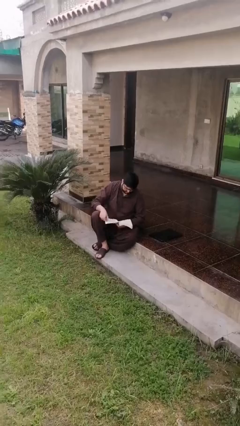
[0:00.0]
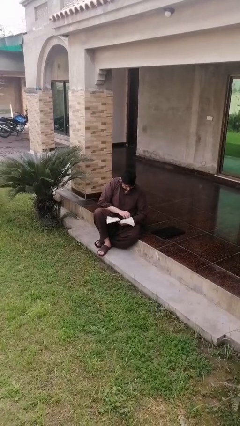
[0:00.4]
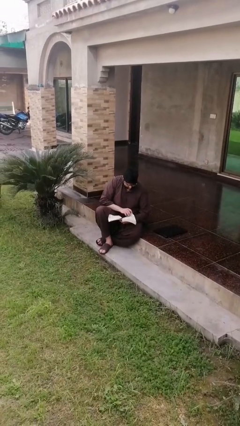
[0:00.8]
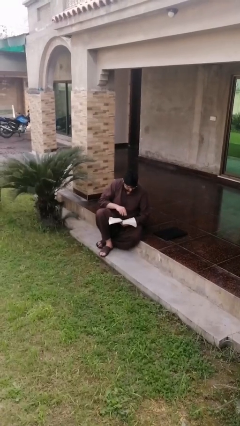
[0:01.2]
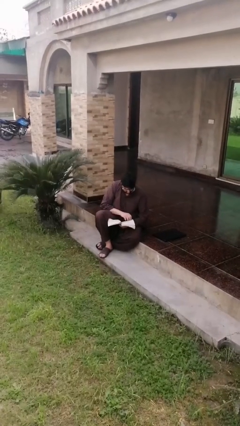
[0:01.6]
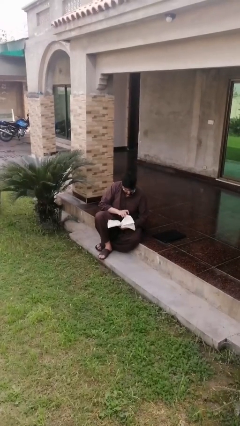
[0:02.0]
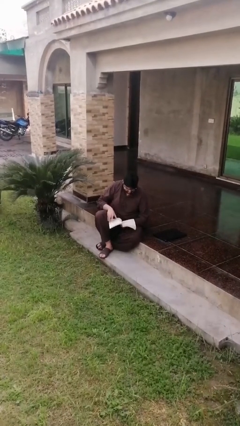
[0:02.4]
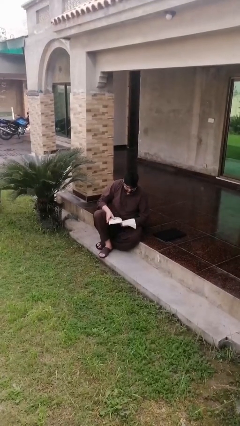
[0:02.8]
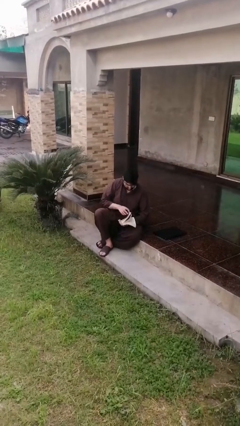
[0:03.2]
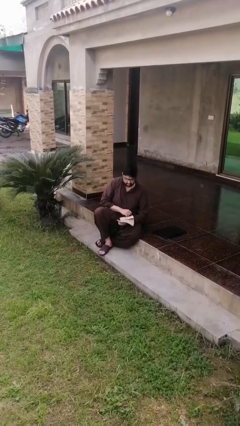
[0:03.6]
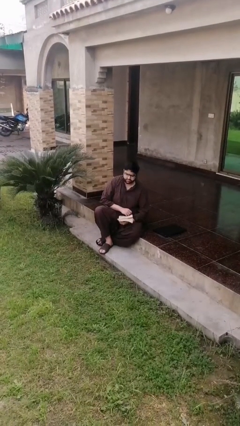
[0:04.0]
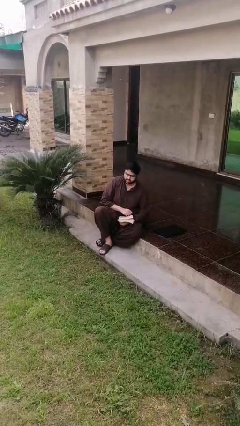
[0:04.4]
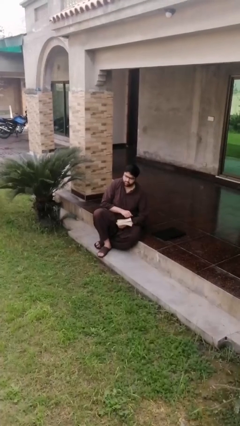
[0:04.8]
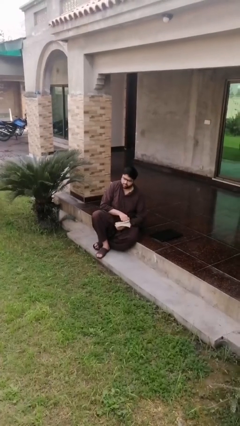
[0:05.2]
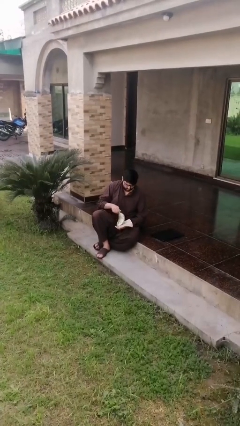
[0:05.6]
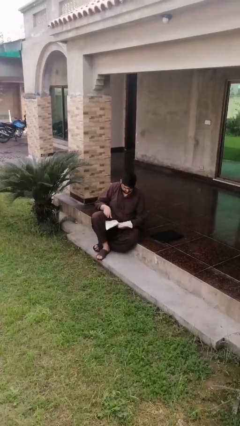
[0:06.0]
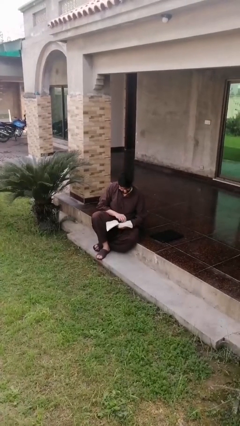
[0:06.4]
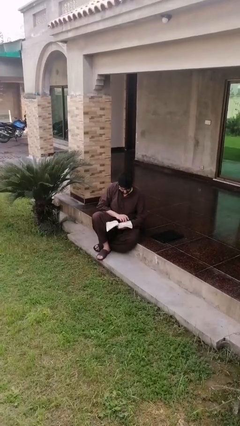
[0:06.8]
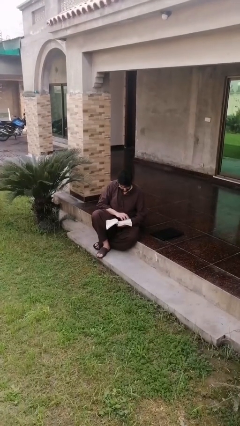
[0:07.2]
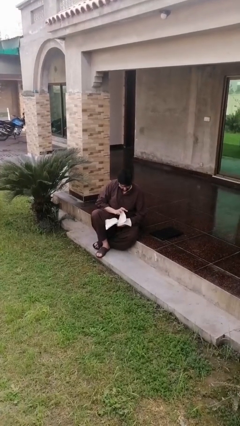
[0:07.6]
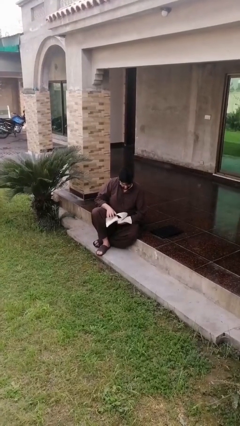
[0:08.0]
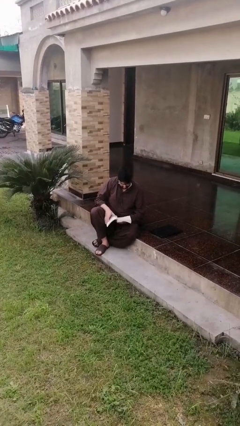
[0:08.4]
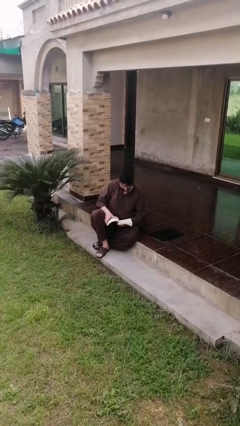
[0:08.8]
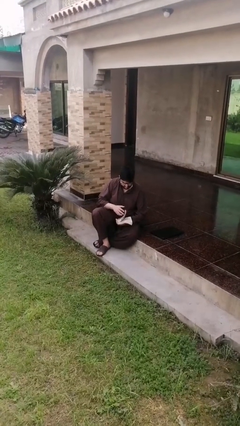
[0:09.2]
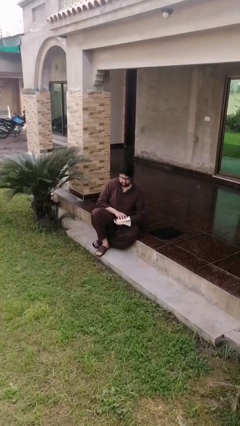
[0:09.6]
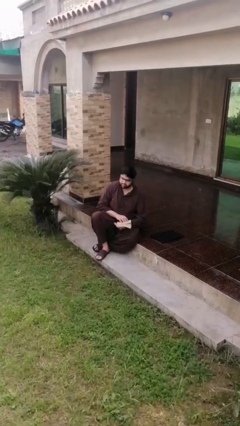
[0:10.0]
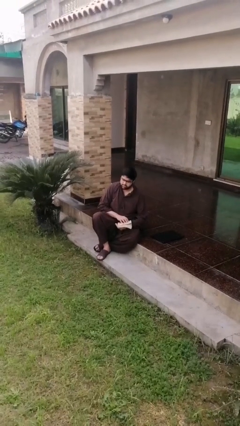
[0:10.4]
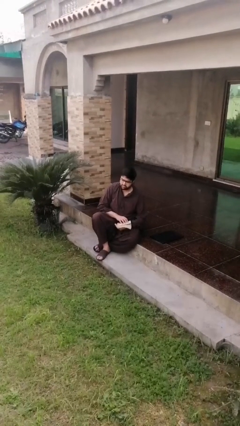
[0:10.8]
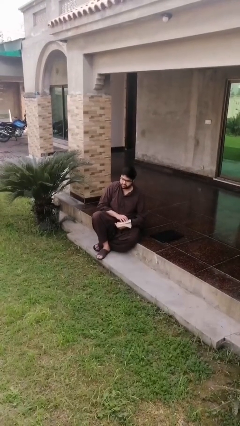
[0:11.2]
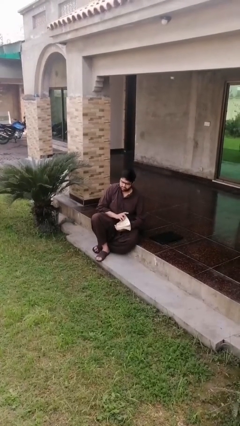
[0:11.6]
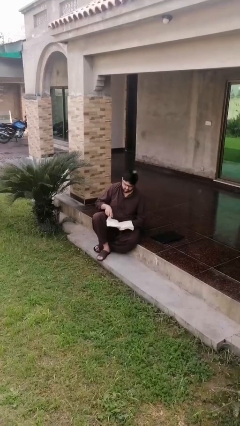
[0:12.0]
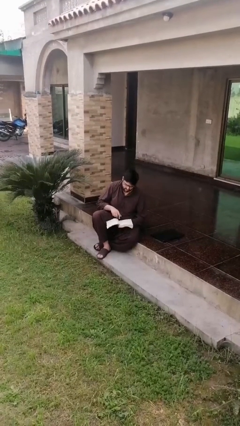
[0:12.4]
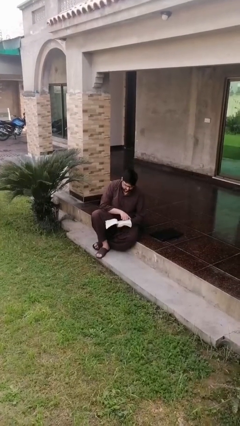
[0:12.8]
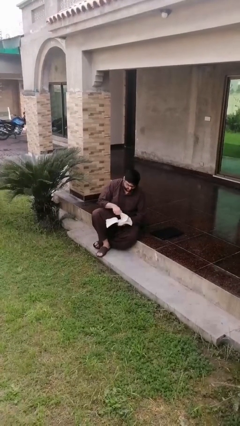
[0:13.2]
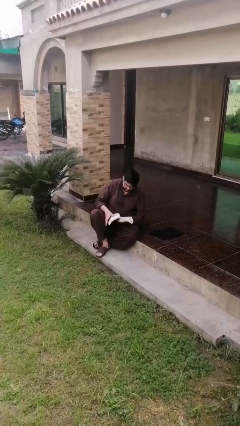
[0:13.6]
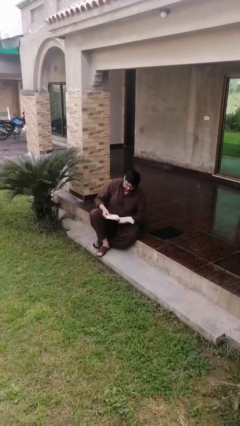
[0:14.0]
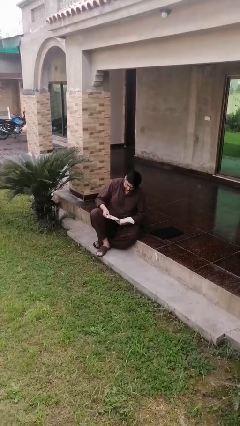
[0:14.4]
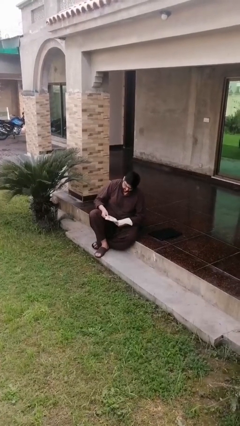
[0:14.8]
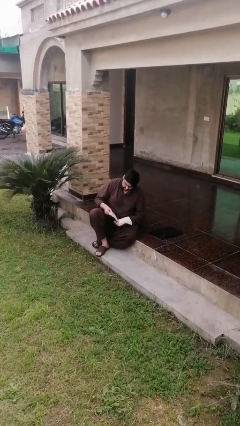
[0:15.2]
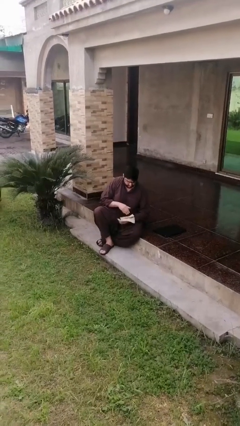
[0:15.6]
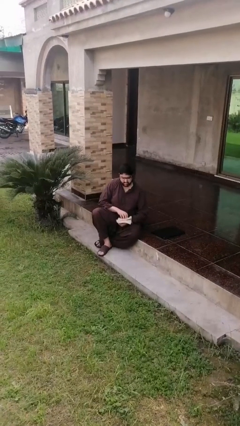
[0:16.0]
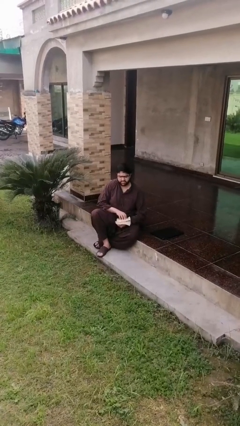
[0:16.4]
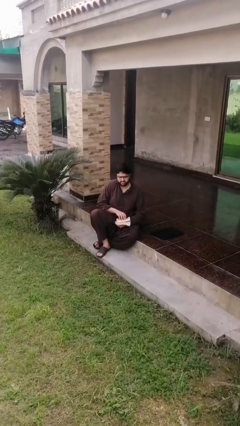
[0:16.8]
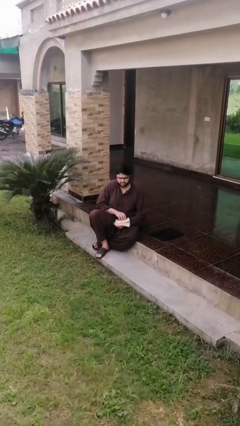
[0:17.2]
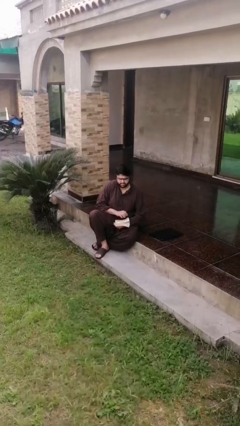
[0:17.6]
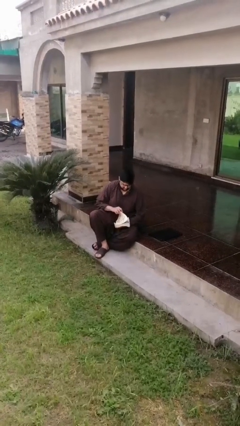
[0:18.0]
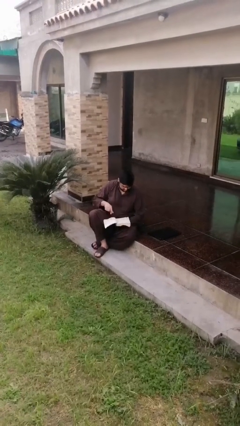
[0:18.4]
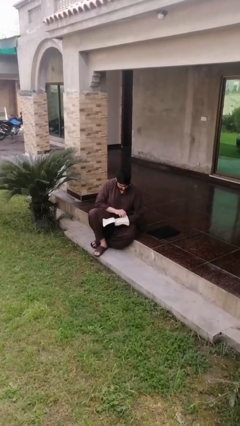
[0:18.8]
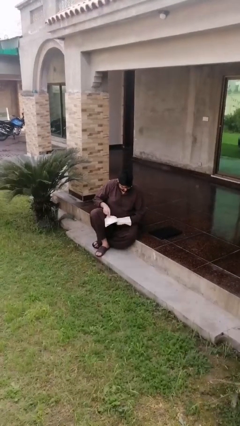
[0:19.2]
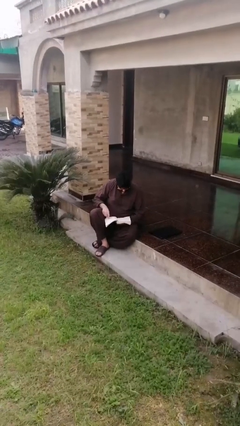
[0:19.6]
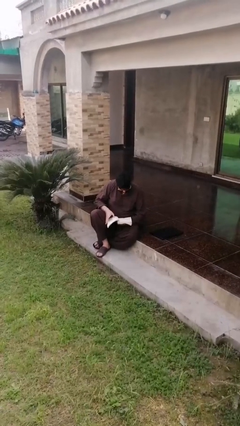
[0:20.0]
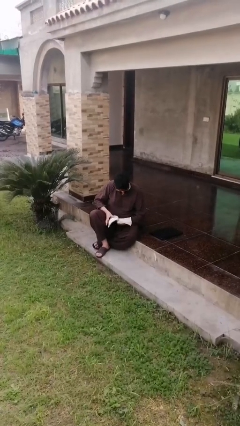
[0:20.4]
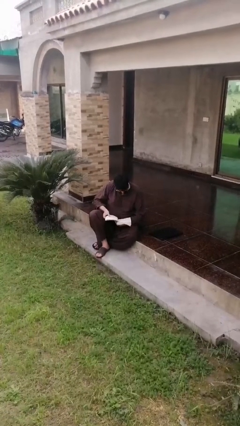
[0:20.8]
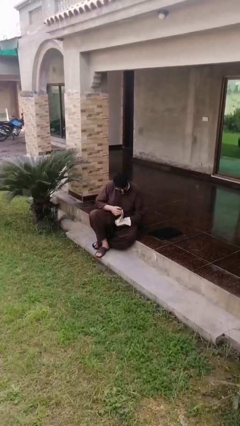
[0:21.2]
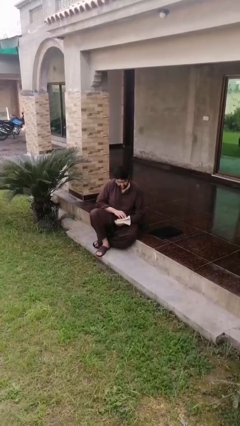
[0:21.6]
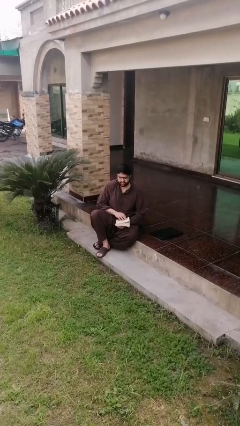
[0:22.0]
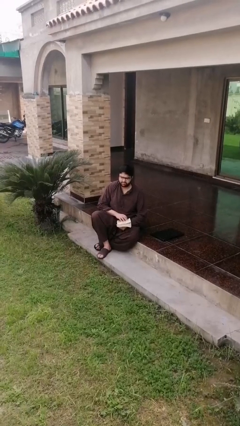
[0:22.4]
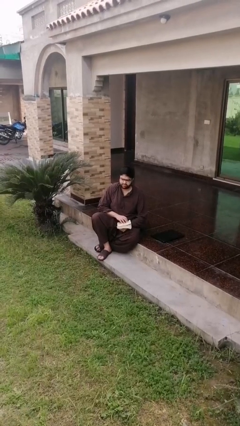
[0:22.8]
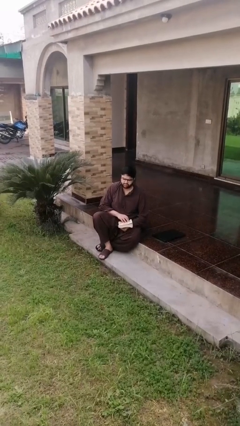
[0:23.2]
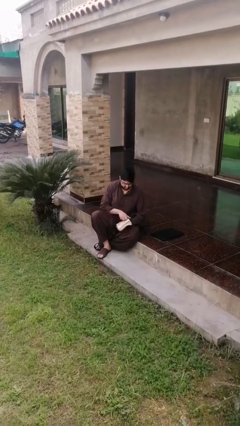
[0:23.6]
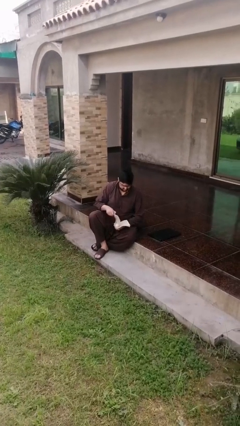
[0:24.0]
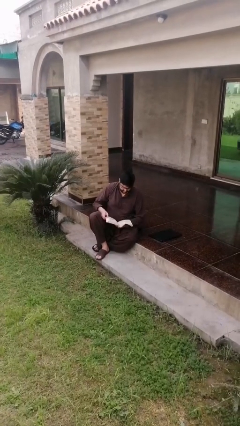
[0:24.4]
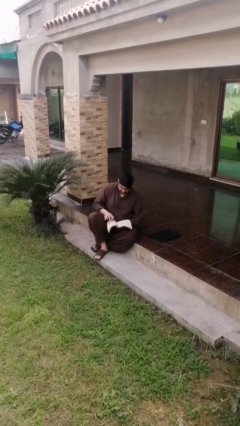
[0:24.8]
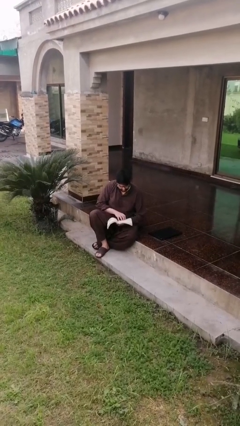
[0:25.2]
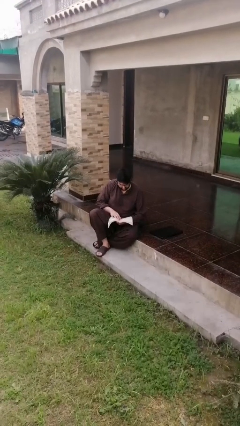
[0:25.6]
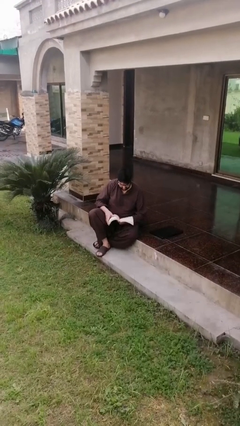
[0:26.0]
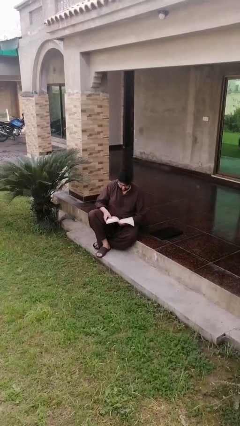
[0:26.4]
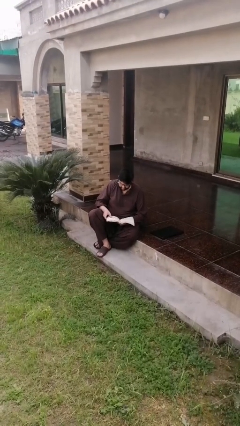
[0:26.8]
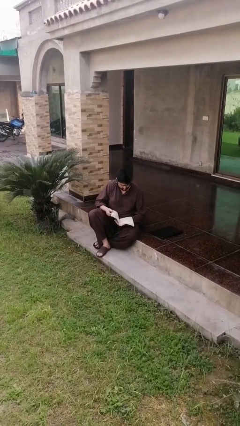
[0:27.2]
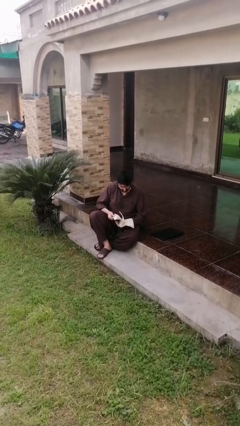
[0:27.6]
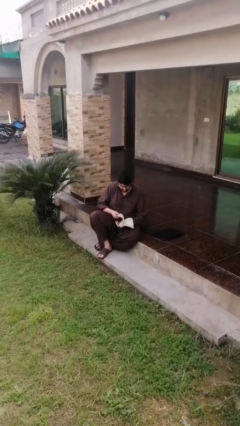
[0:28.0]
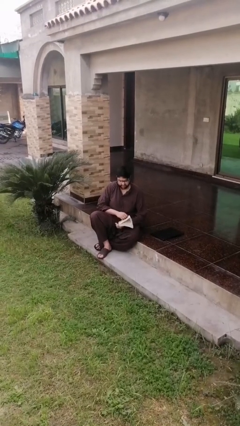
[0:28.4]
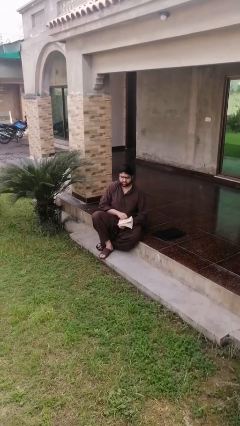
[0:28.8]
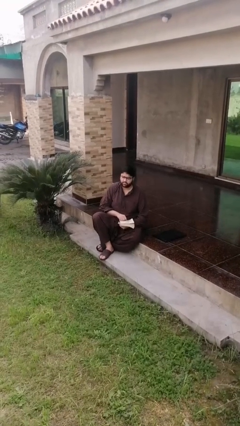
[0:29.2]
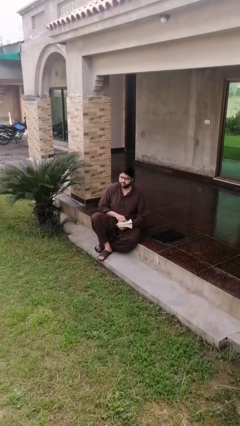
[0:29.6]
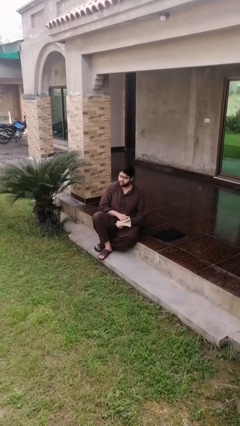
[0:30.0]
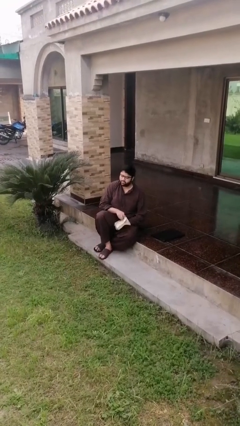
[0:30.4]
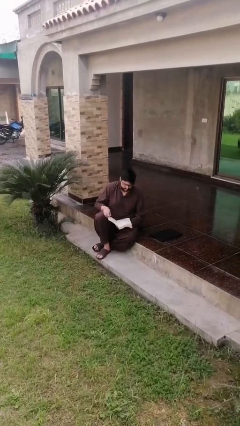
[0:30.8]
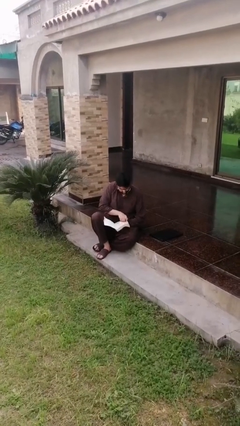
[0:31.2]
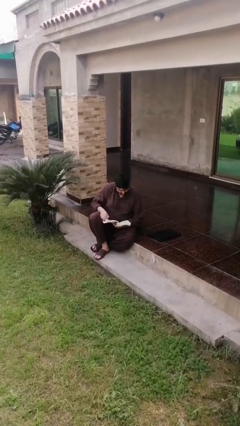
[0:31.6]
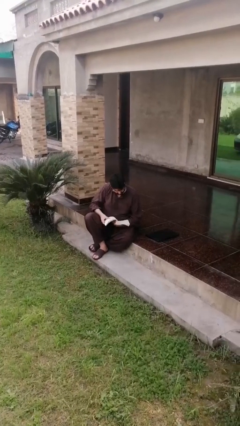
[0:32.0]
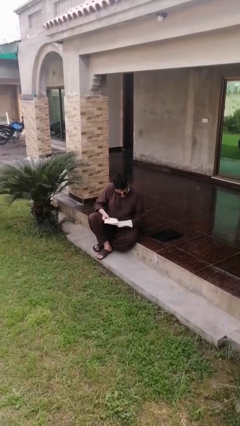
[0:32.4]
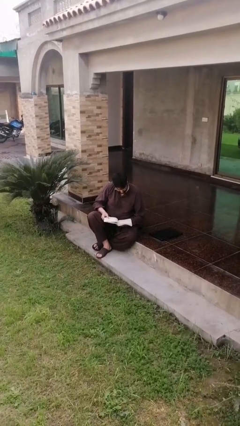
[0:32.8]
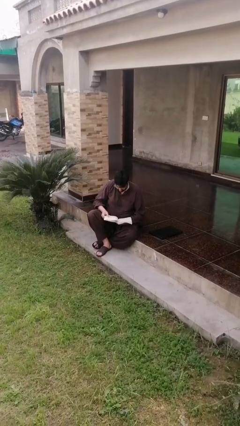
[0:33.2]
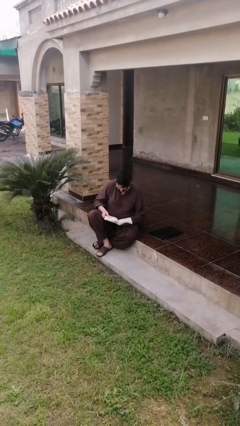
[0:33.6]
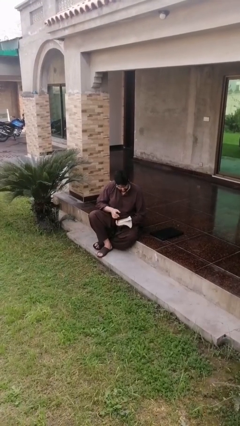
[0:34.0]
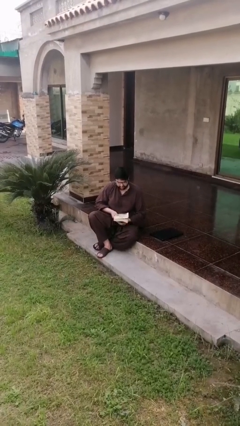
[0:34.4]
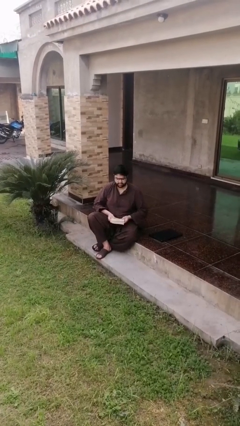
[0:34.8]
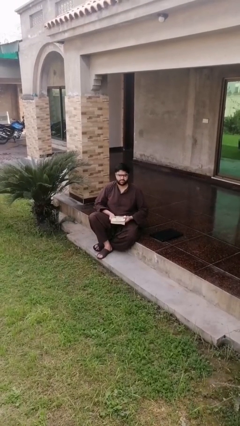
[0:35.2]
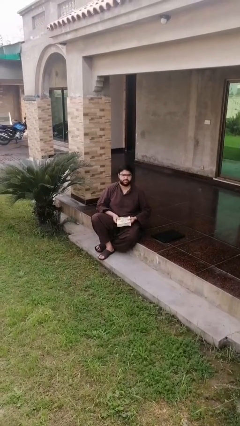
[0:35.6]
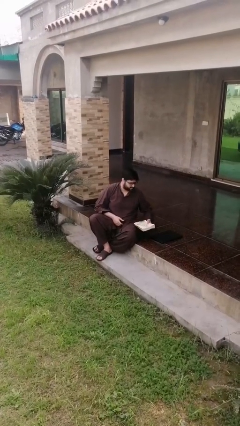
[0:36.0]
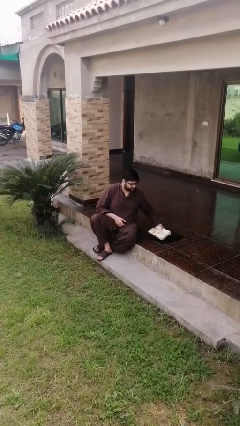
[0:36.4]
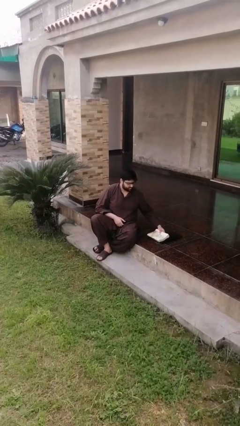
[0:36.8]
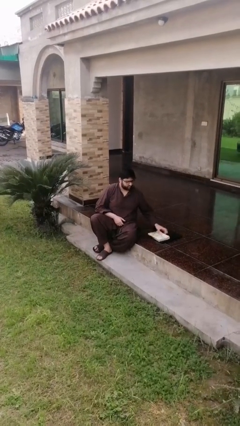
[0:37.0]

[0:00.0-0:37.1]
person reads document
